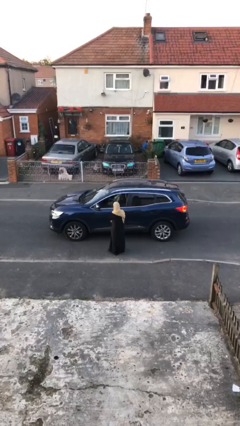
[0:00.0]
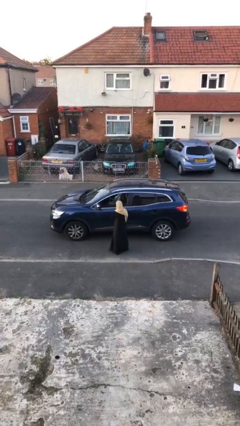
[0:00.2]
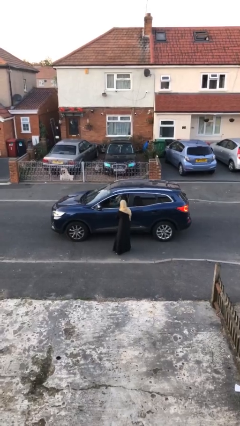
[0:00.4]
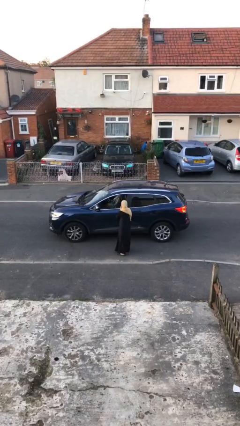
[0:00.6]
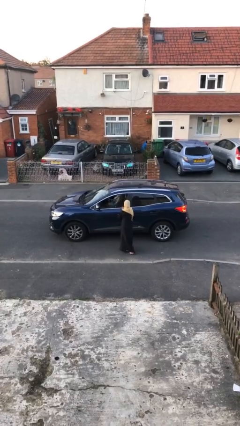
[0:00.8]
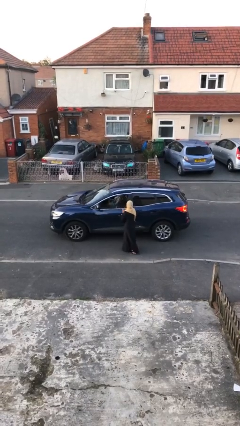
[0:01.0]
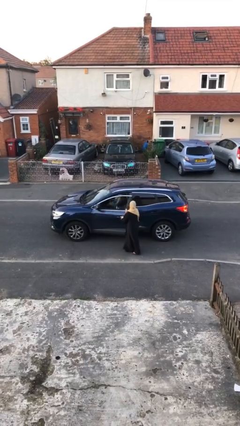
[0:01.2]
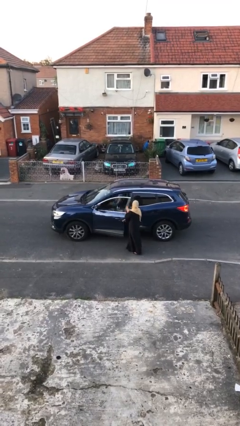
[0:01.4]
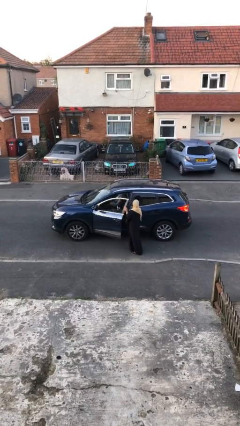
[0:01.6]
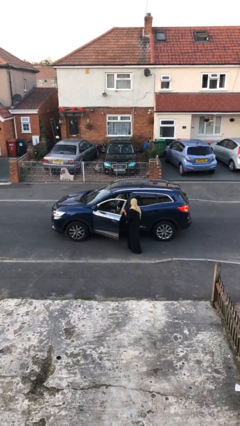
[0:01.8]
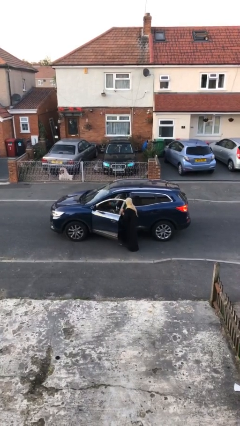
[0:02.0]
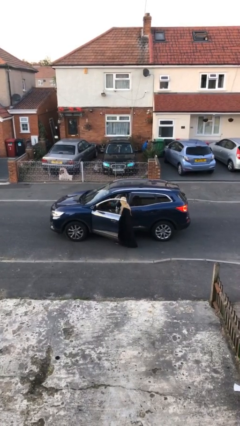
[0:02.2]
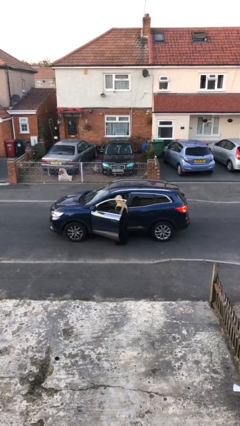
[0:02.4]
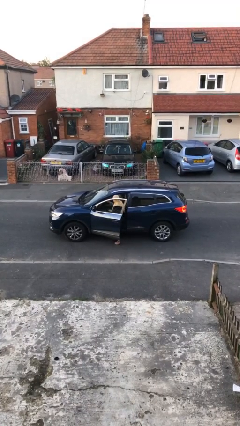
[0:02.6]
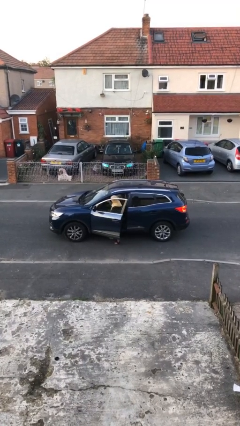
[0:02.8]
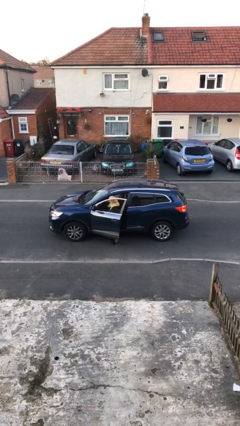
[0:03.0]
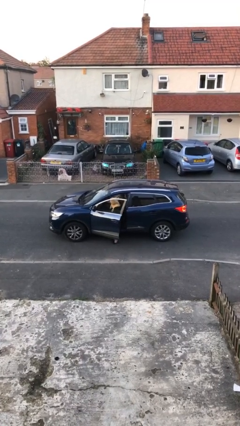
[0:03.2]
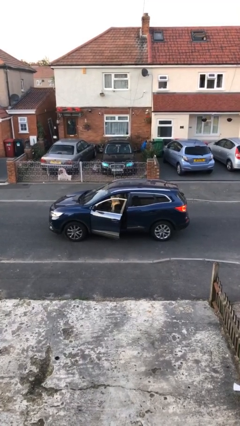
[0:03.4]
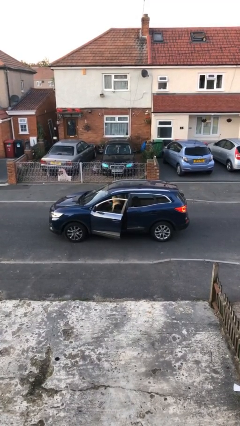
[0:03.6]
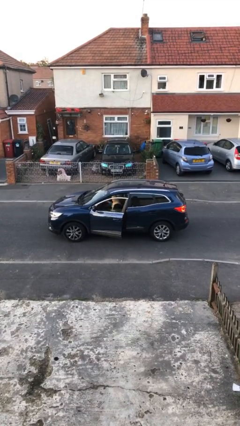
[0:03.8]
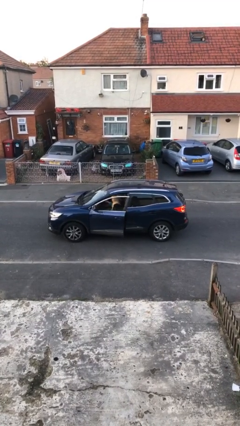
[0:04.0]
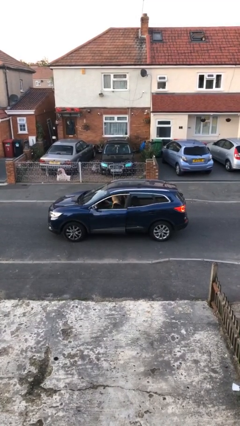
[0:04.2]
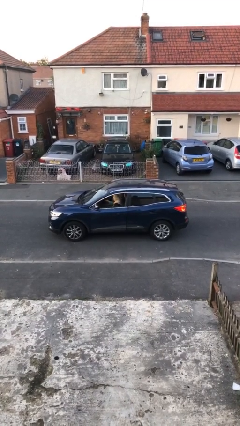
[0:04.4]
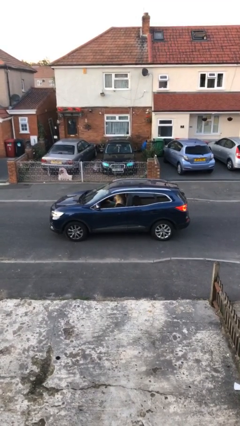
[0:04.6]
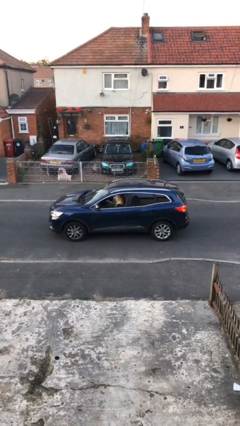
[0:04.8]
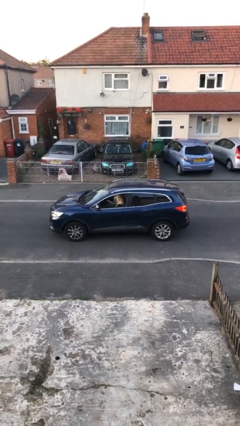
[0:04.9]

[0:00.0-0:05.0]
car picks up person

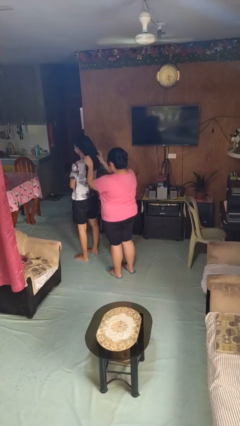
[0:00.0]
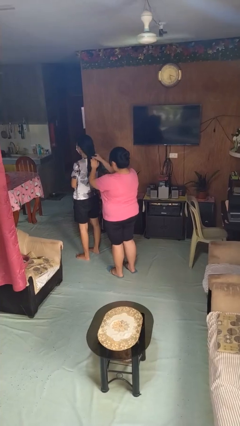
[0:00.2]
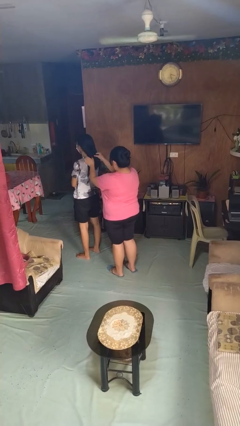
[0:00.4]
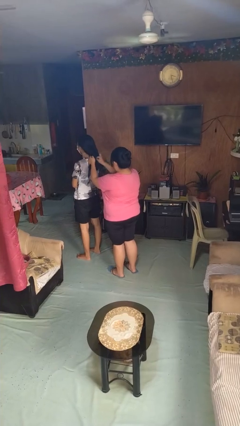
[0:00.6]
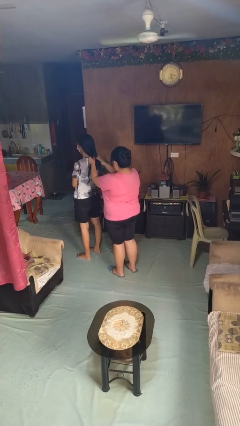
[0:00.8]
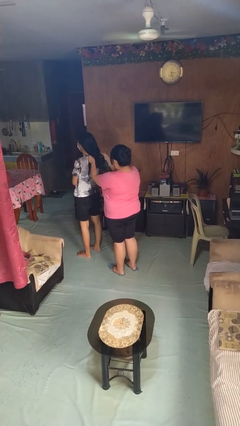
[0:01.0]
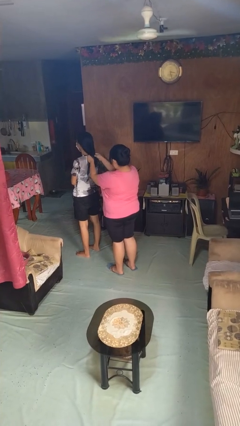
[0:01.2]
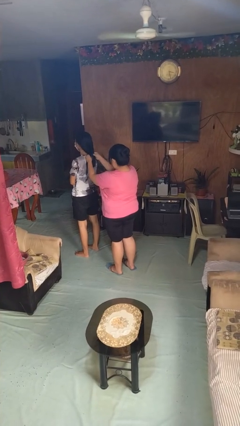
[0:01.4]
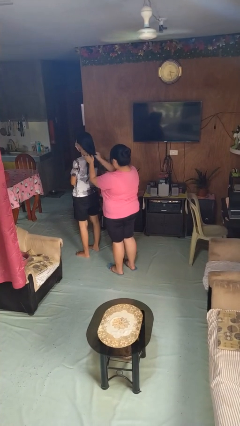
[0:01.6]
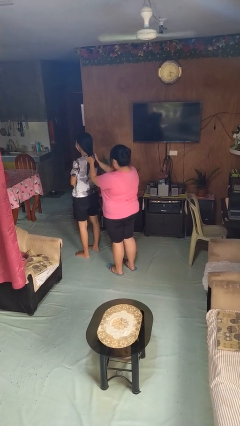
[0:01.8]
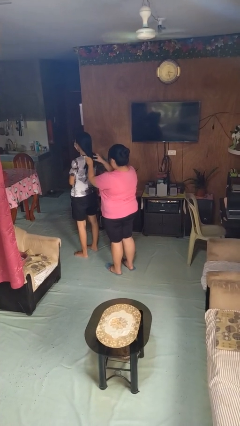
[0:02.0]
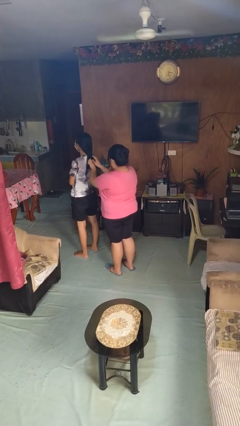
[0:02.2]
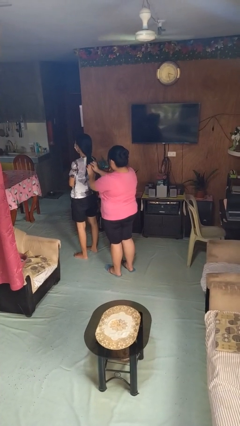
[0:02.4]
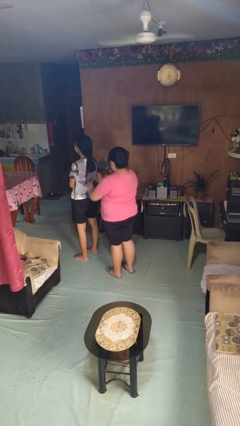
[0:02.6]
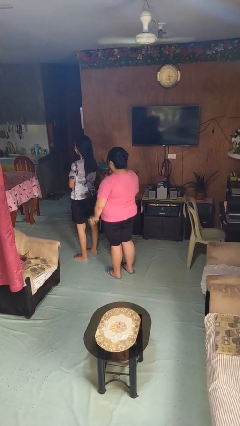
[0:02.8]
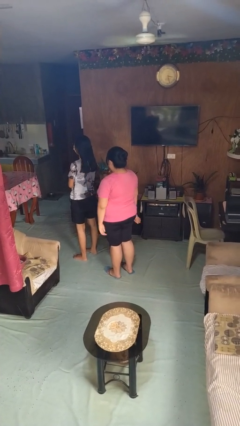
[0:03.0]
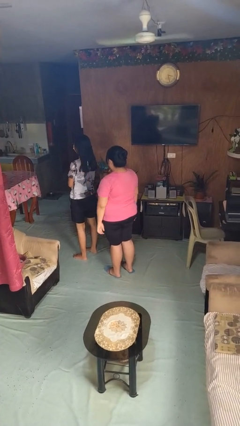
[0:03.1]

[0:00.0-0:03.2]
person braids hair of person

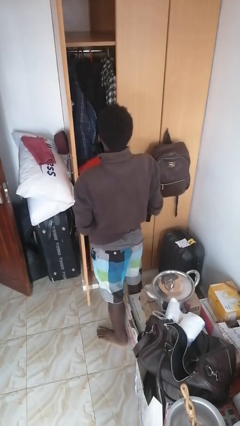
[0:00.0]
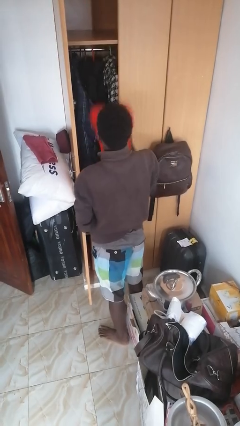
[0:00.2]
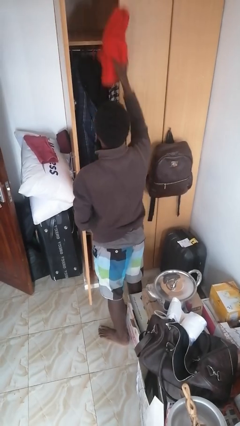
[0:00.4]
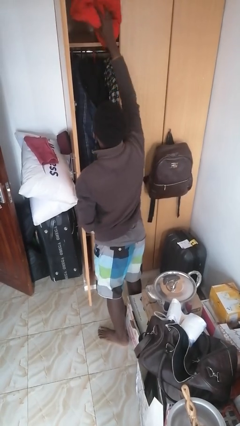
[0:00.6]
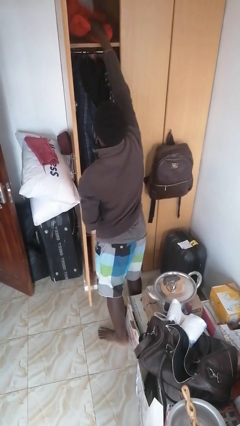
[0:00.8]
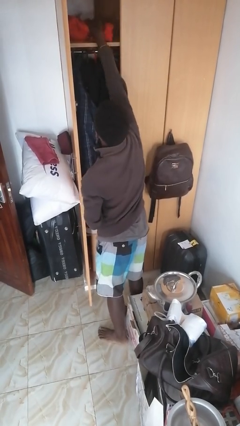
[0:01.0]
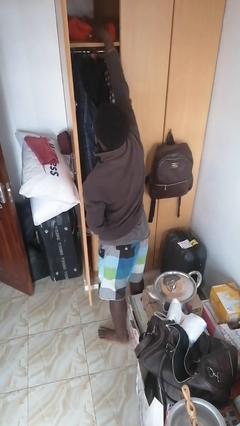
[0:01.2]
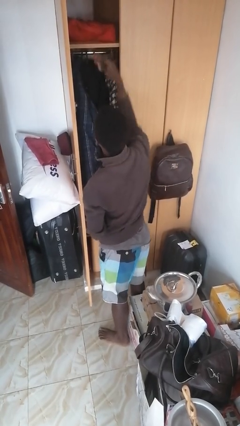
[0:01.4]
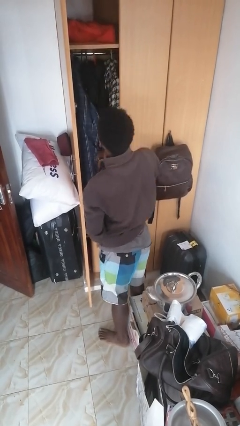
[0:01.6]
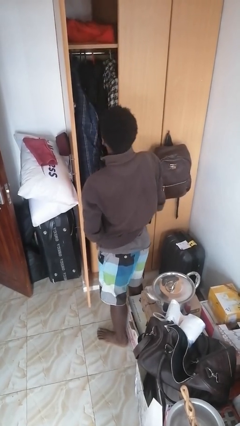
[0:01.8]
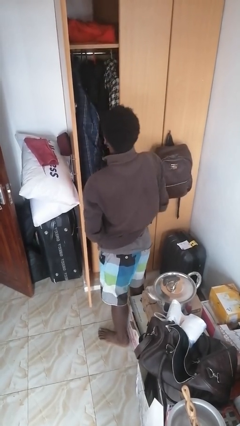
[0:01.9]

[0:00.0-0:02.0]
person puts down object on shelf

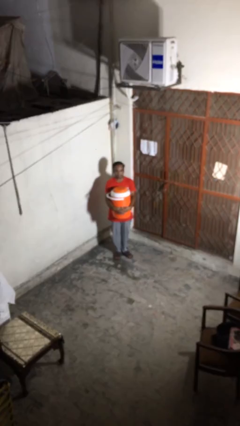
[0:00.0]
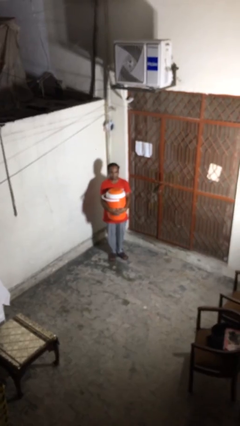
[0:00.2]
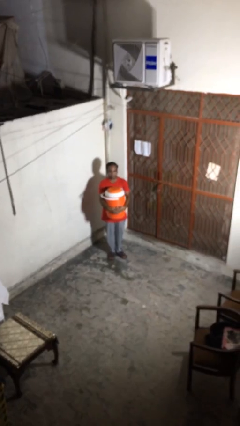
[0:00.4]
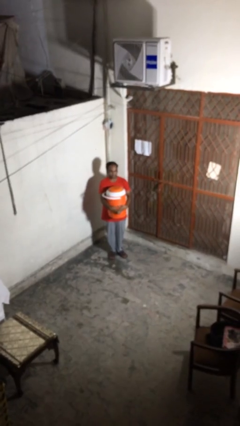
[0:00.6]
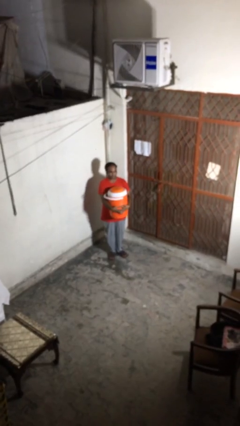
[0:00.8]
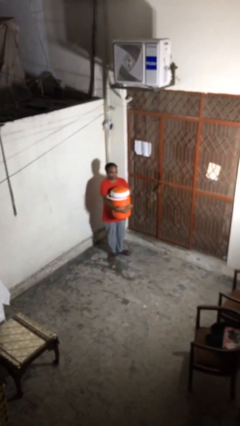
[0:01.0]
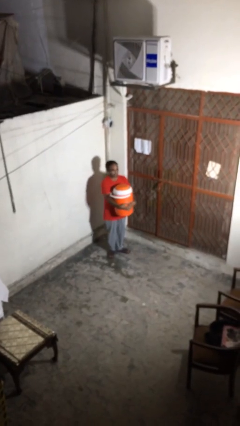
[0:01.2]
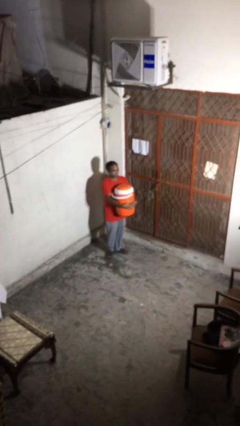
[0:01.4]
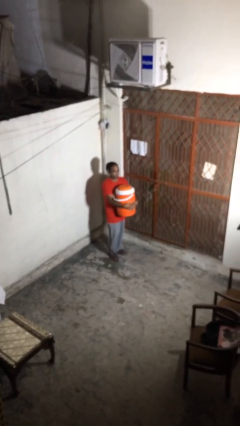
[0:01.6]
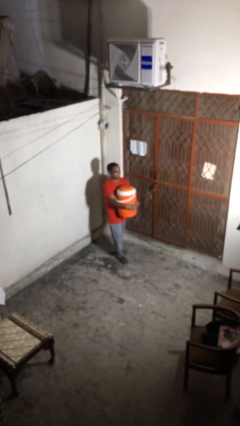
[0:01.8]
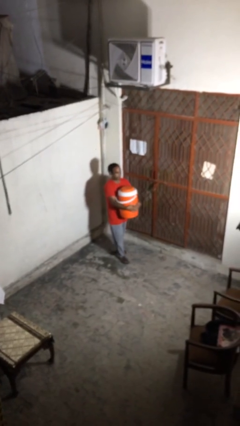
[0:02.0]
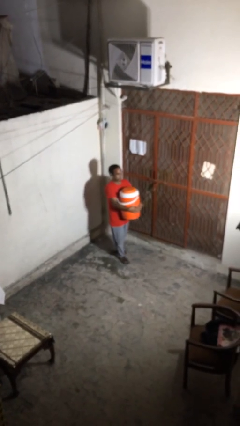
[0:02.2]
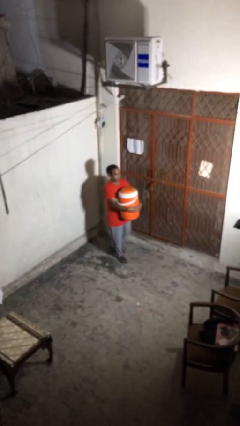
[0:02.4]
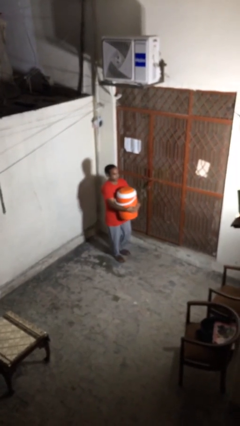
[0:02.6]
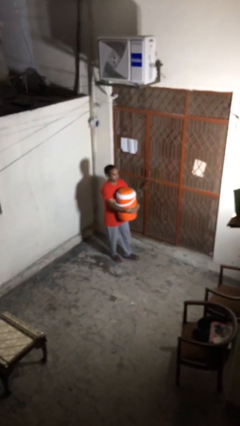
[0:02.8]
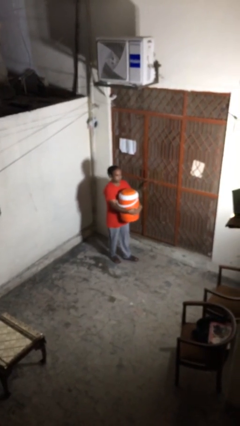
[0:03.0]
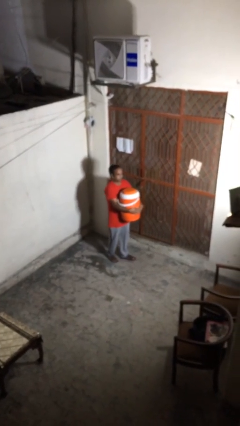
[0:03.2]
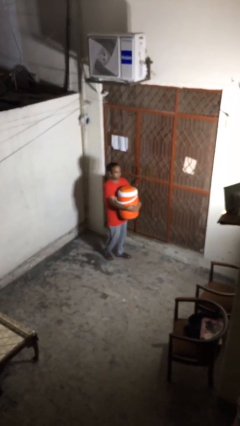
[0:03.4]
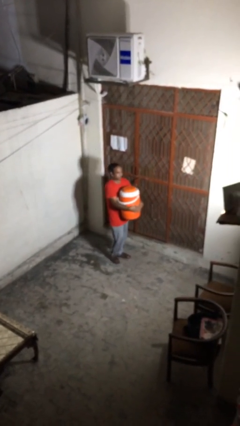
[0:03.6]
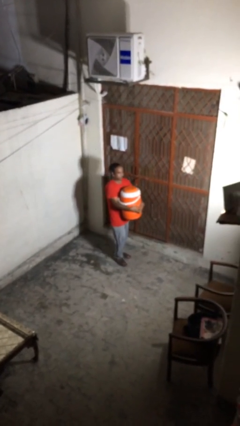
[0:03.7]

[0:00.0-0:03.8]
person carries heavy object

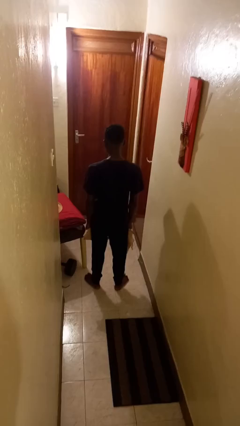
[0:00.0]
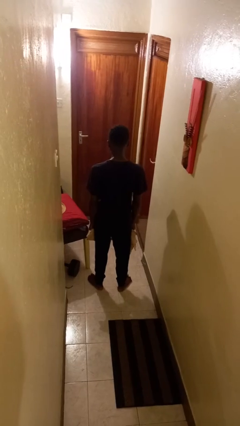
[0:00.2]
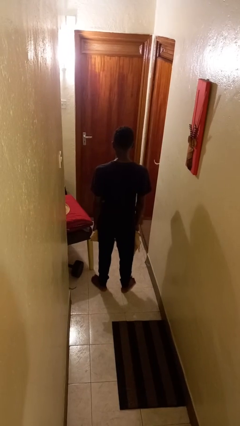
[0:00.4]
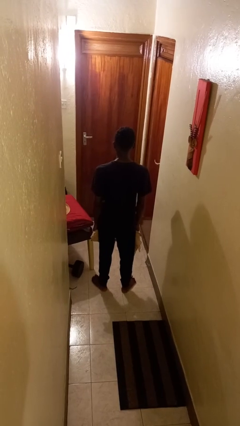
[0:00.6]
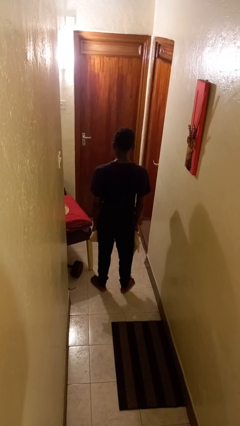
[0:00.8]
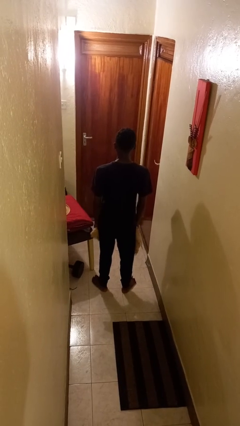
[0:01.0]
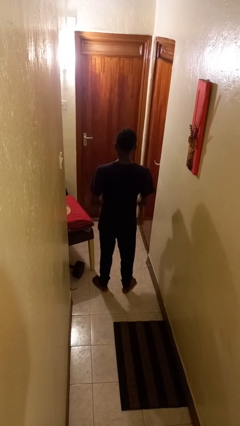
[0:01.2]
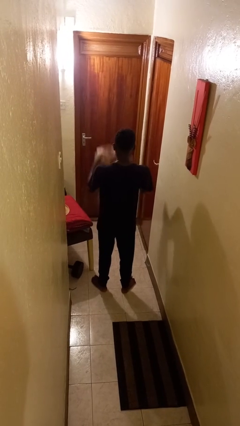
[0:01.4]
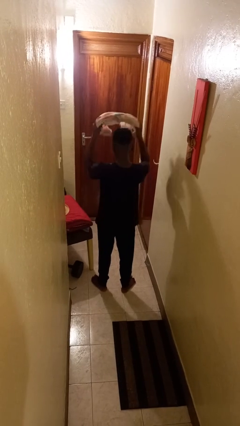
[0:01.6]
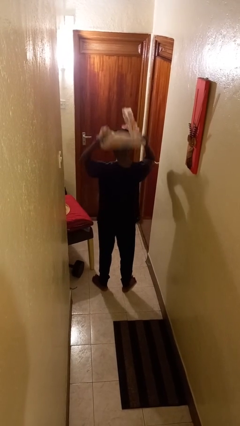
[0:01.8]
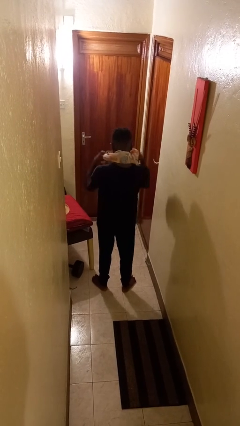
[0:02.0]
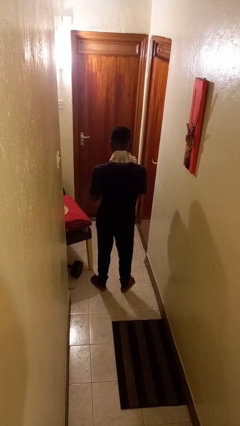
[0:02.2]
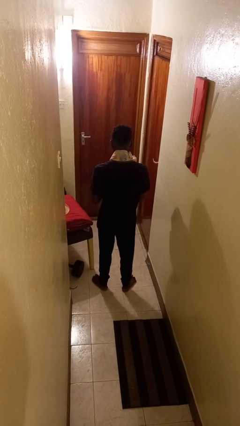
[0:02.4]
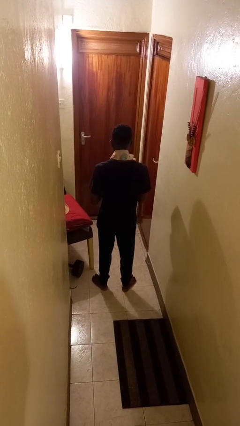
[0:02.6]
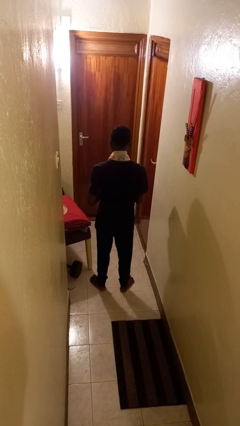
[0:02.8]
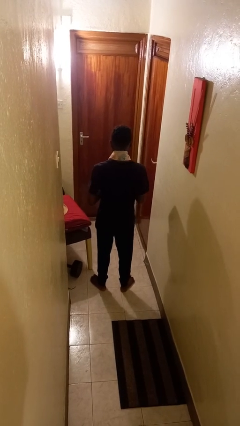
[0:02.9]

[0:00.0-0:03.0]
person puts on scarf

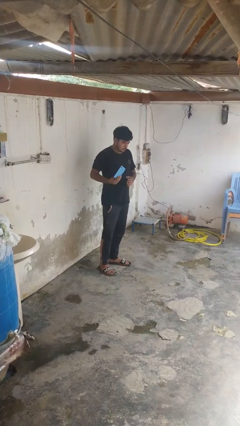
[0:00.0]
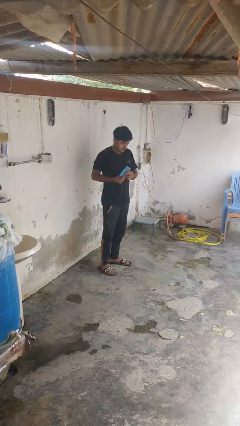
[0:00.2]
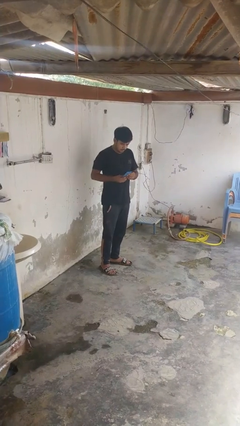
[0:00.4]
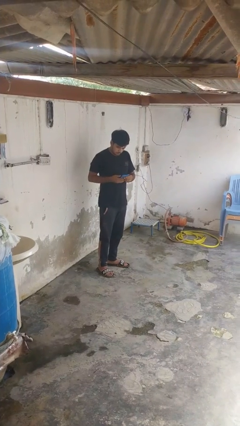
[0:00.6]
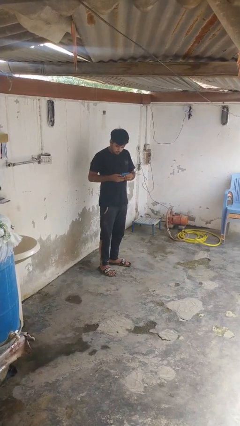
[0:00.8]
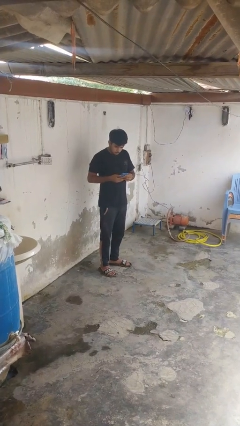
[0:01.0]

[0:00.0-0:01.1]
person puts phone into pocket
